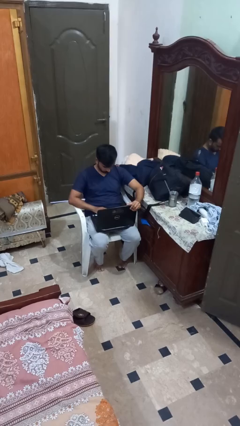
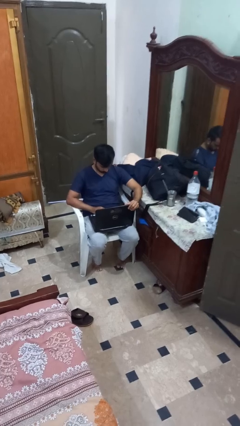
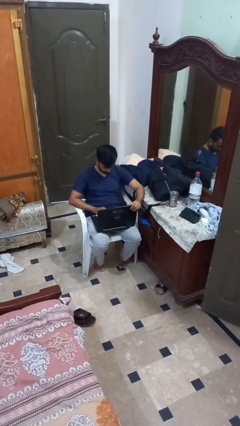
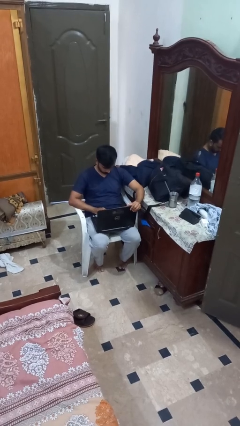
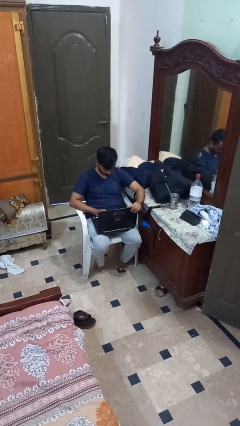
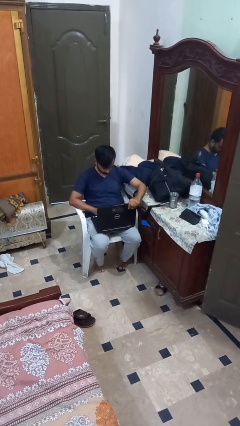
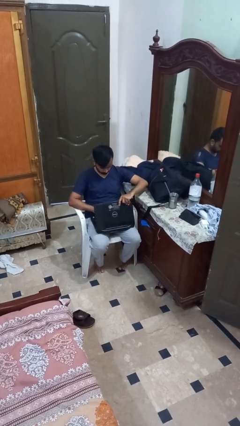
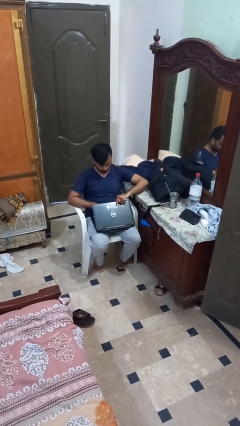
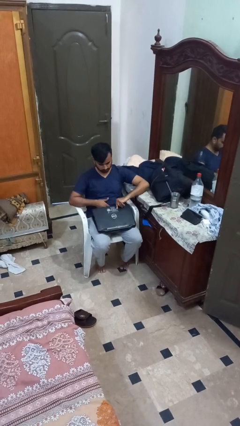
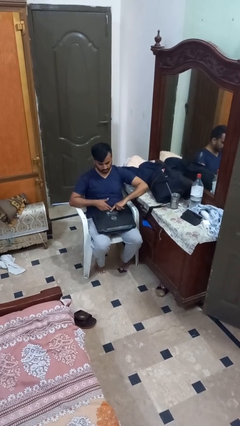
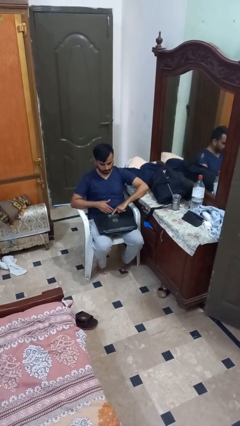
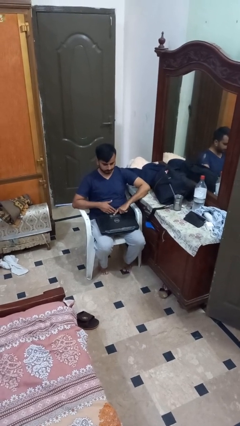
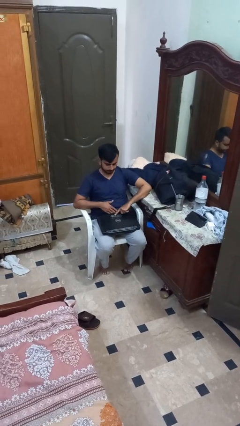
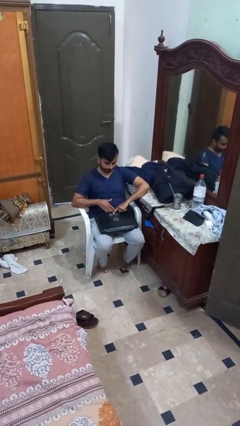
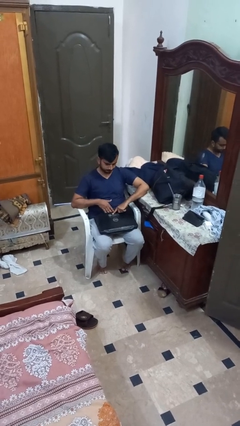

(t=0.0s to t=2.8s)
person closes laptop

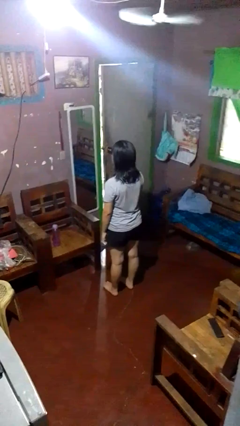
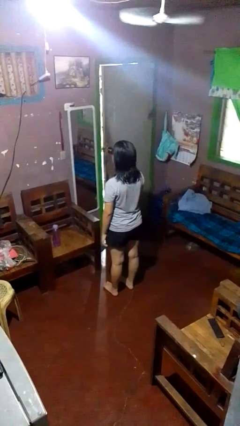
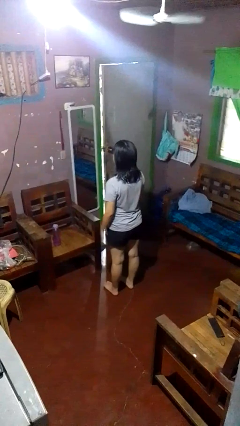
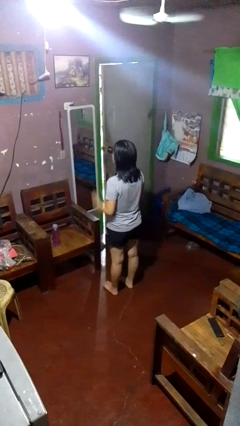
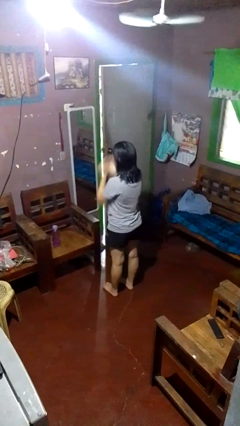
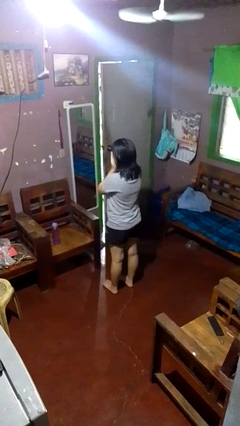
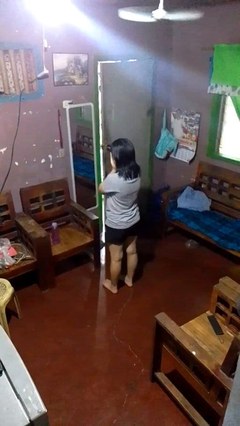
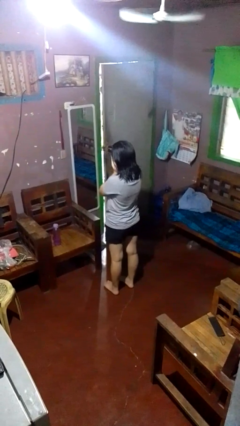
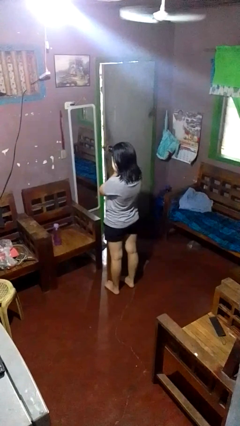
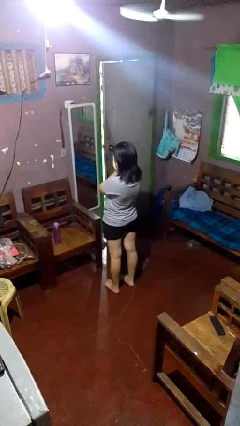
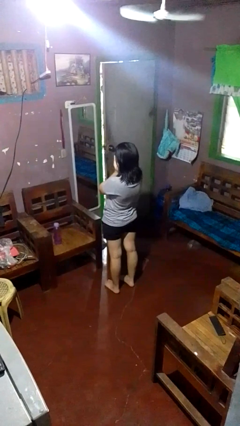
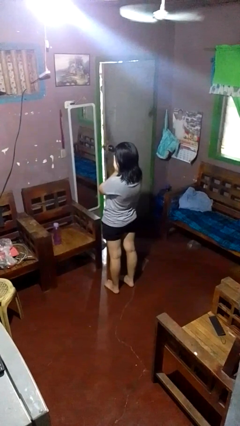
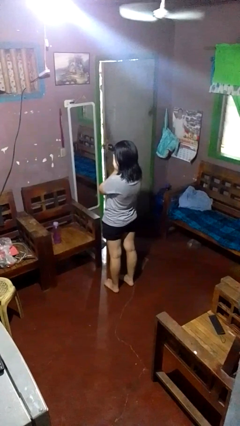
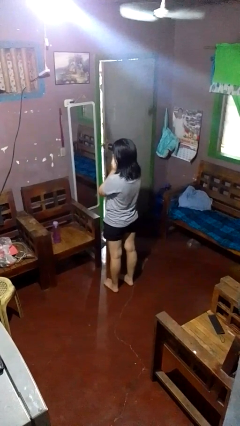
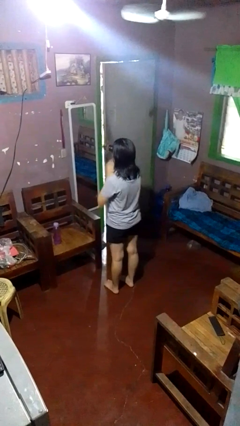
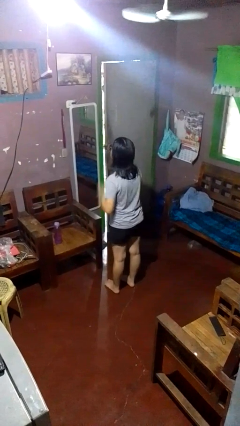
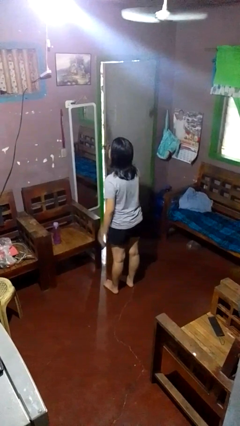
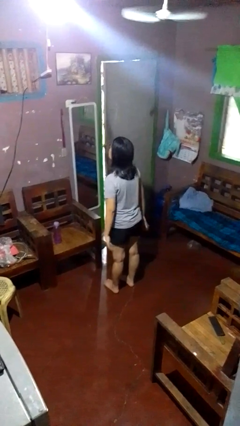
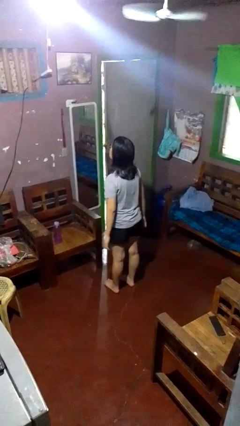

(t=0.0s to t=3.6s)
person covers face with hands

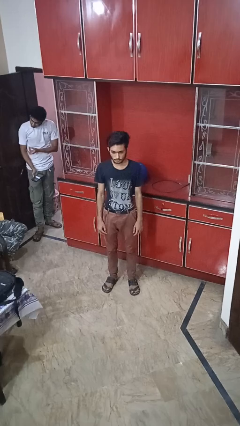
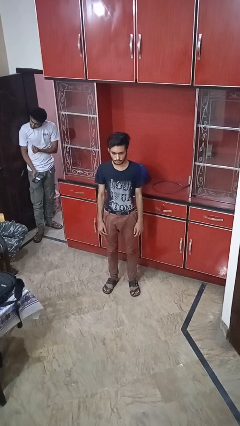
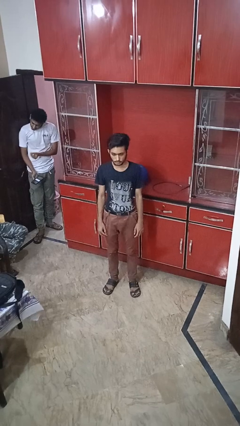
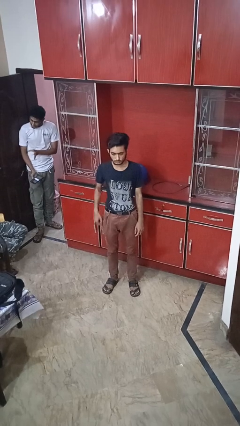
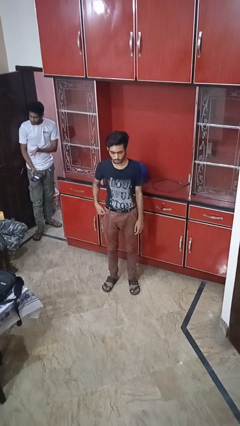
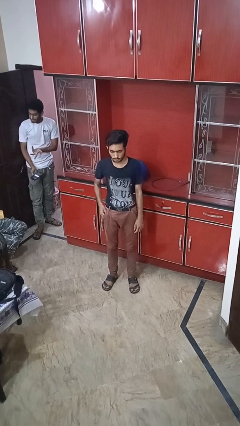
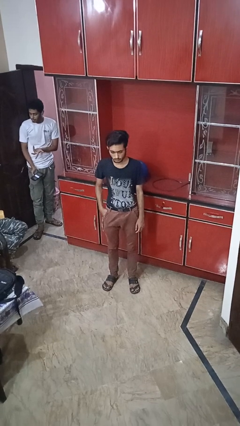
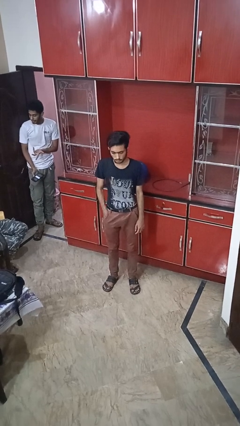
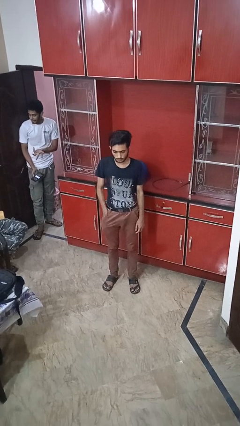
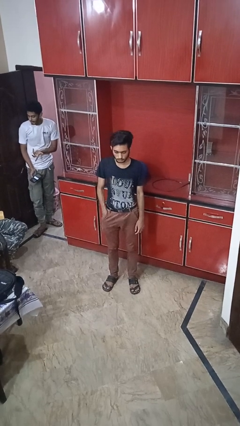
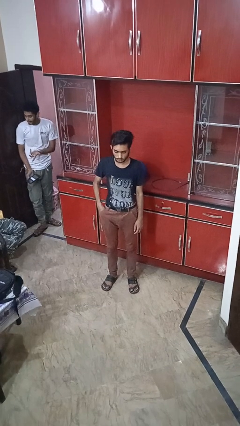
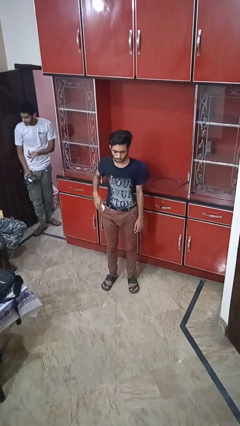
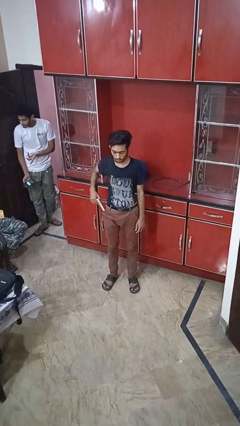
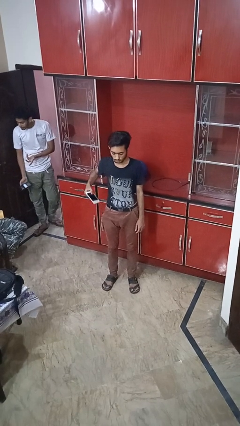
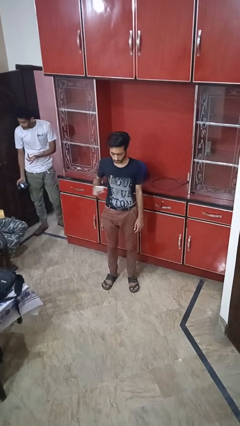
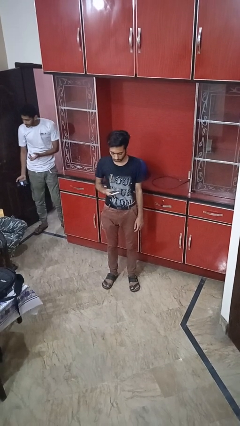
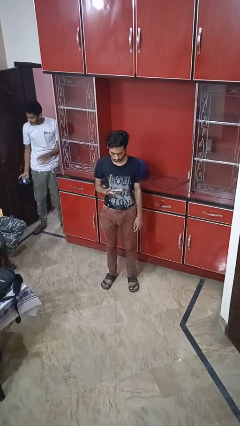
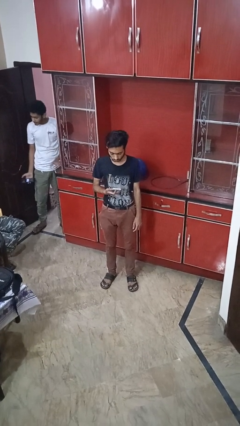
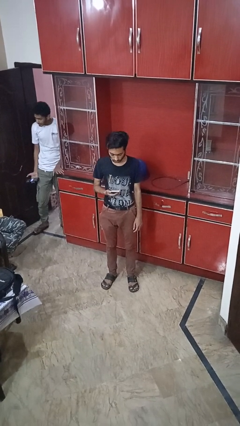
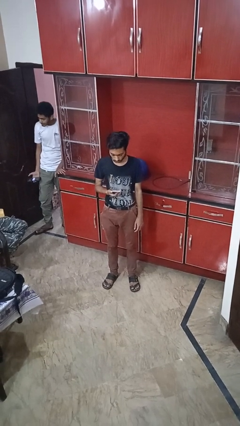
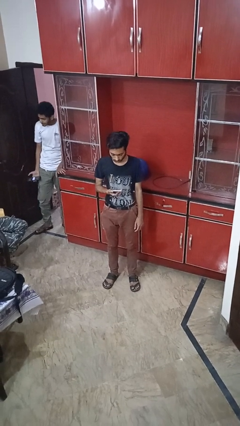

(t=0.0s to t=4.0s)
person takes phone from pocket

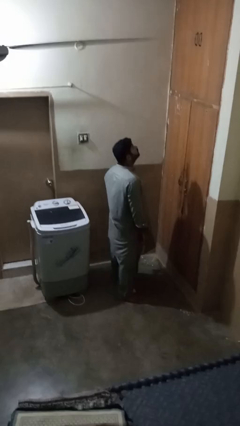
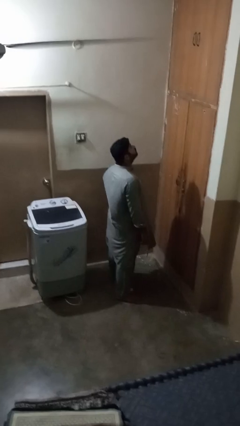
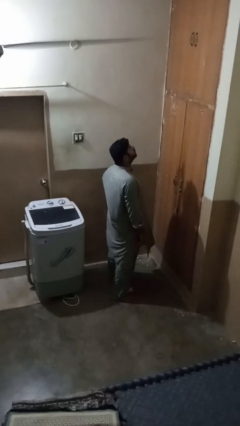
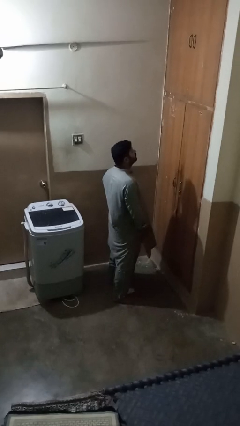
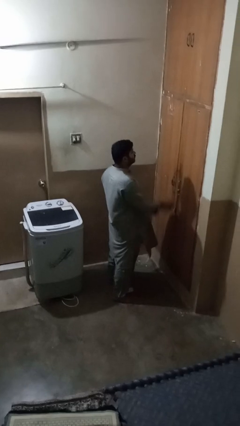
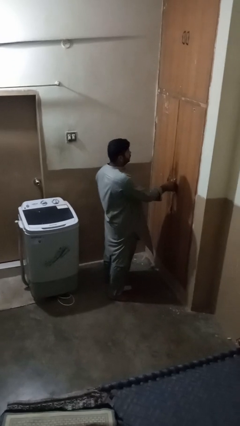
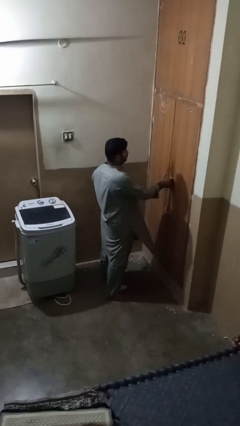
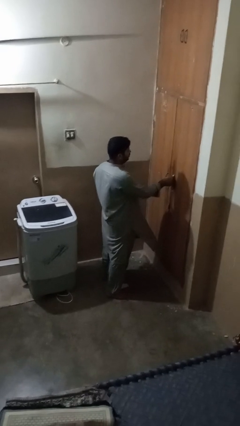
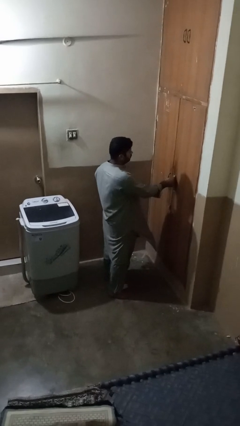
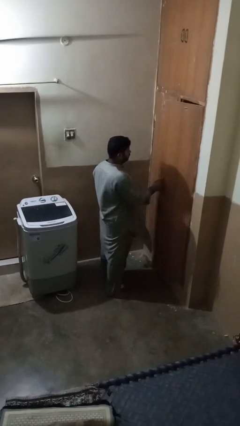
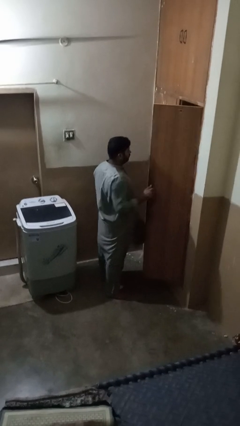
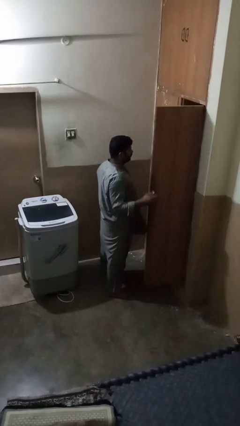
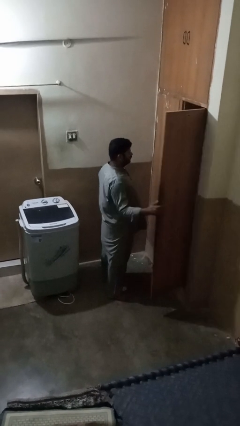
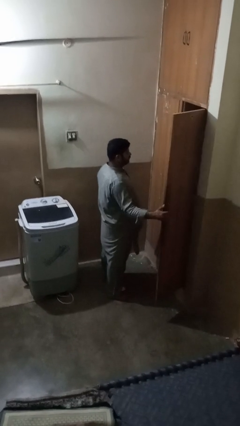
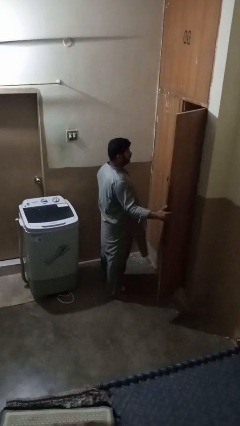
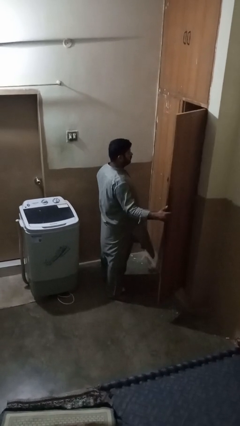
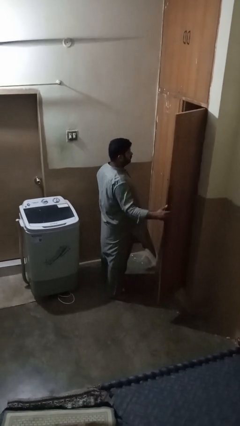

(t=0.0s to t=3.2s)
person opens closet door

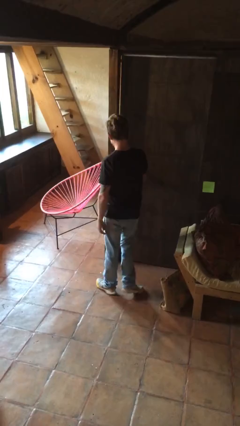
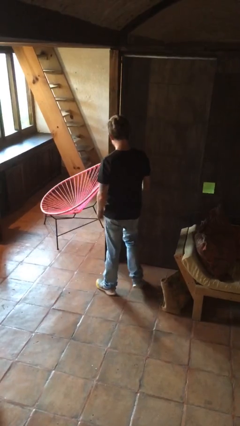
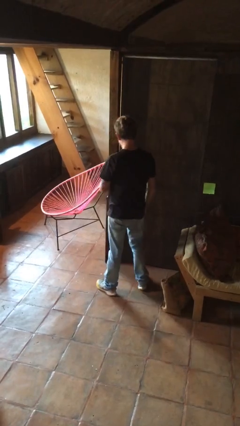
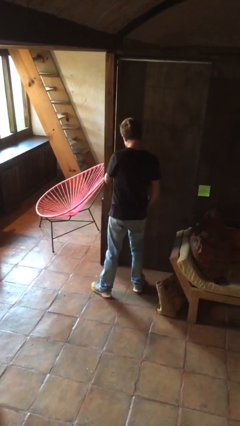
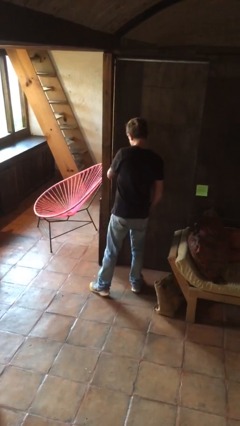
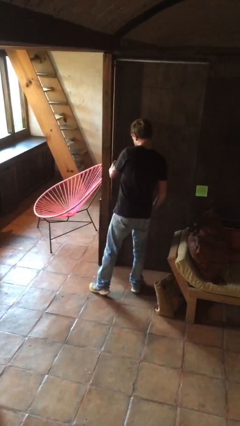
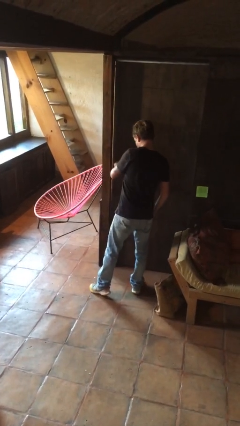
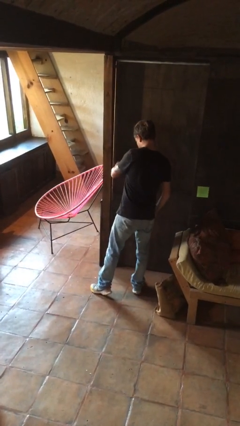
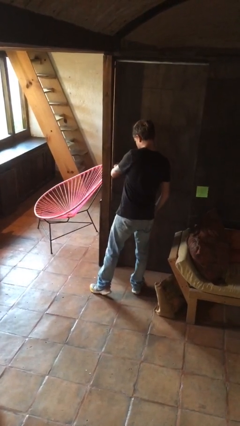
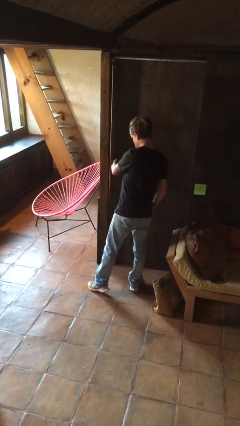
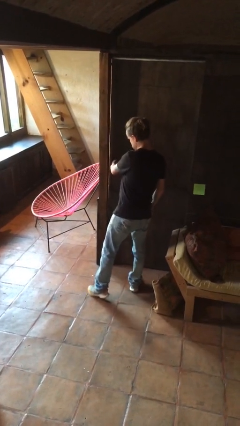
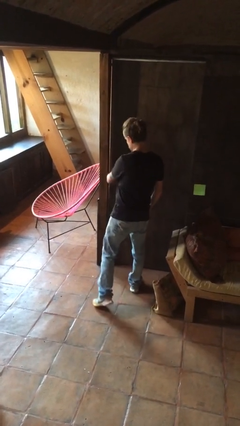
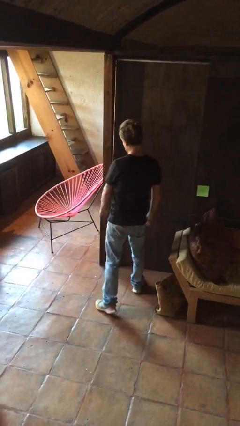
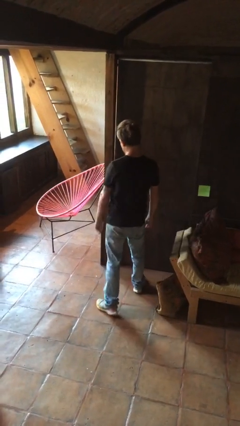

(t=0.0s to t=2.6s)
person locks door with keys

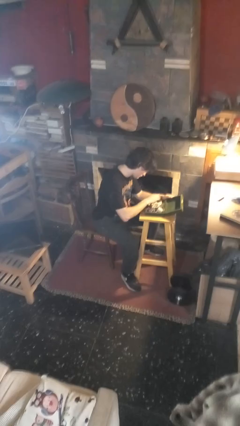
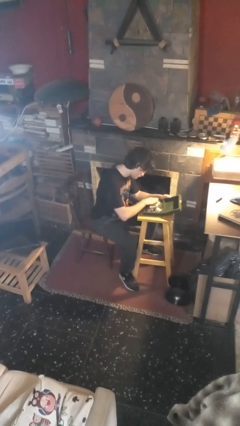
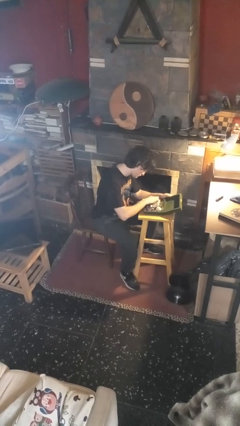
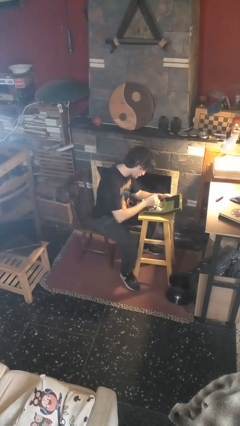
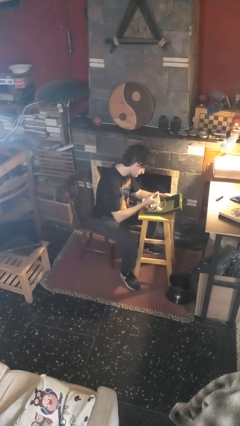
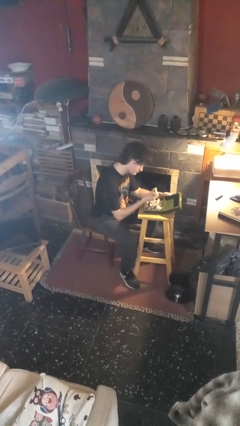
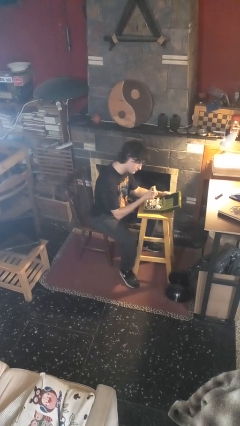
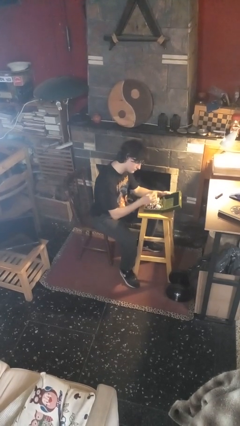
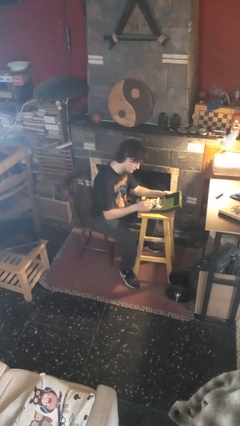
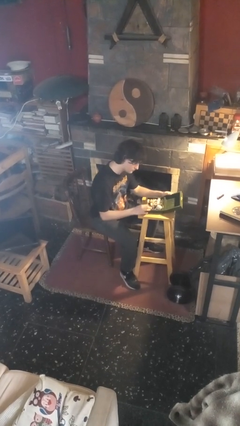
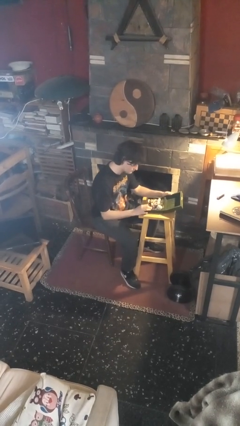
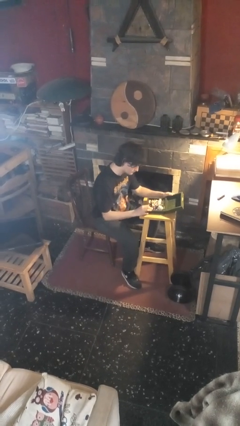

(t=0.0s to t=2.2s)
person searches jewelry box
